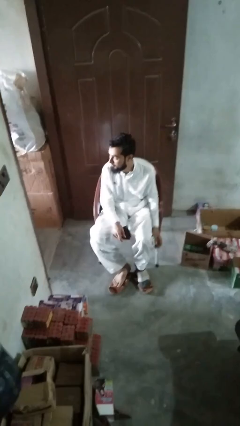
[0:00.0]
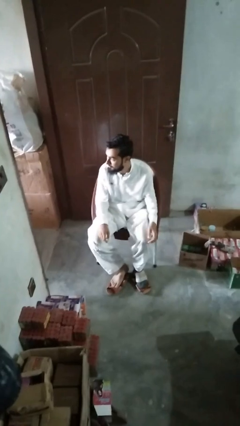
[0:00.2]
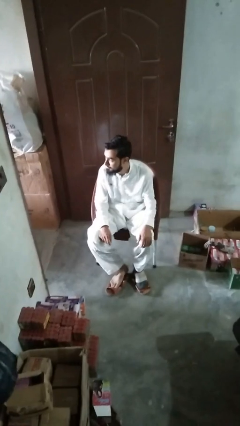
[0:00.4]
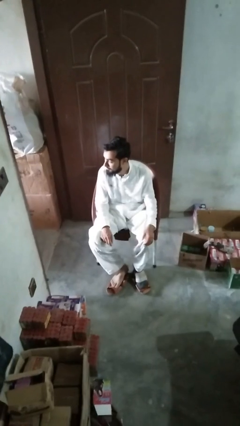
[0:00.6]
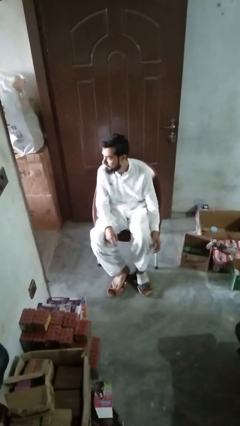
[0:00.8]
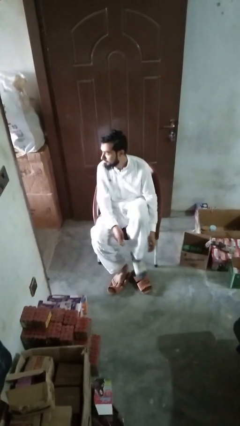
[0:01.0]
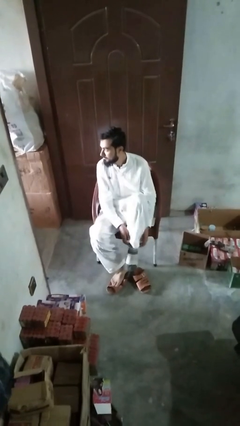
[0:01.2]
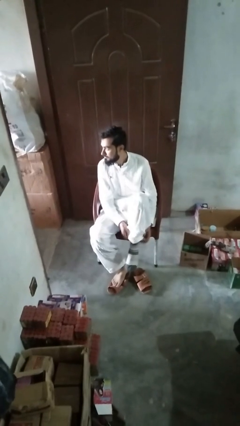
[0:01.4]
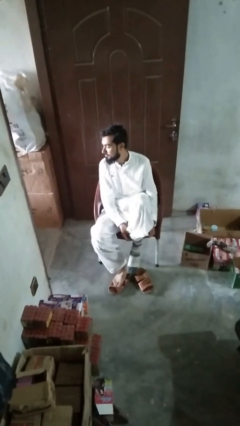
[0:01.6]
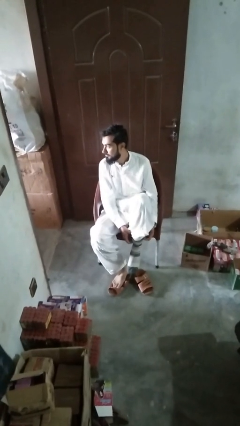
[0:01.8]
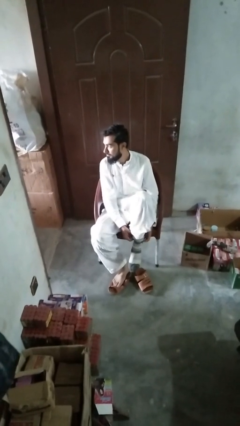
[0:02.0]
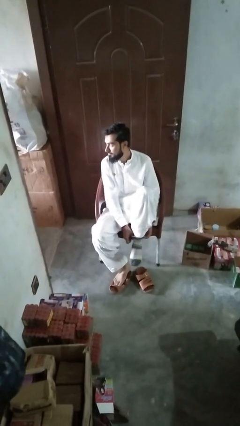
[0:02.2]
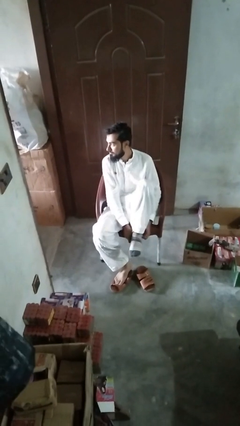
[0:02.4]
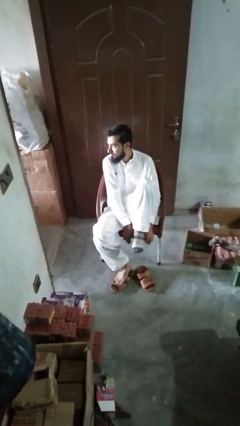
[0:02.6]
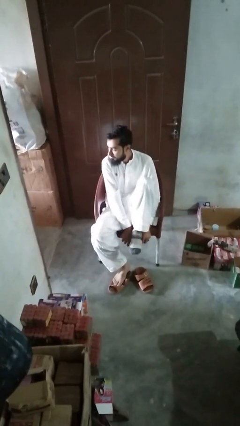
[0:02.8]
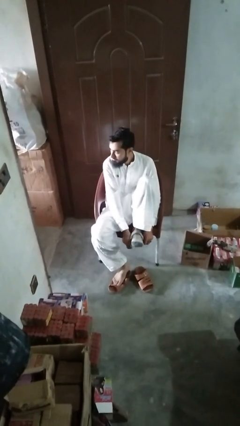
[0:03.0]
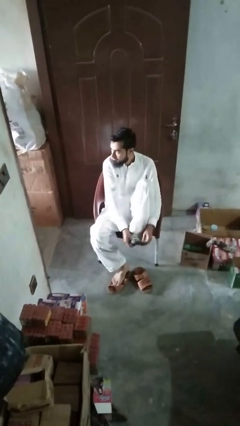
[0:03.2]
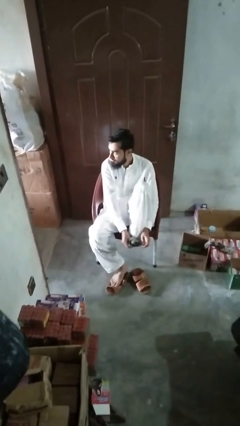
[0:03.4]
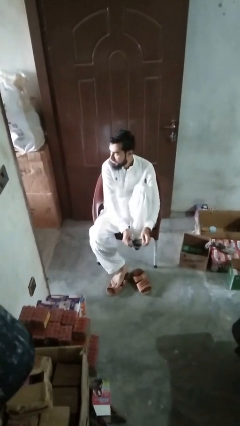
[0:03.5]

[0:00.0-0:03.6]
person takes off socks

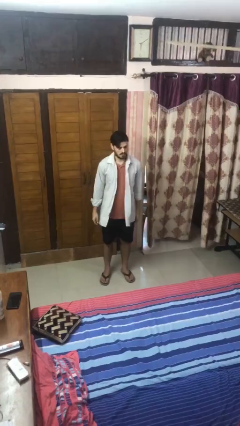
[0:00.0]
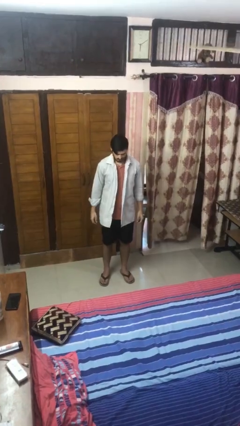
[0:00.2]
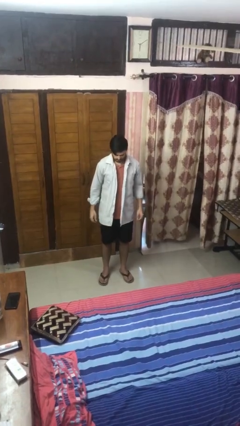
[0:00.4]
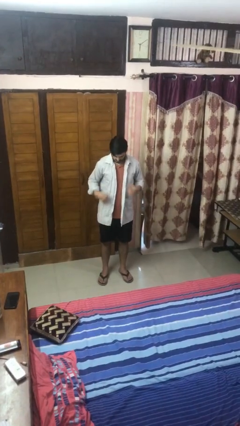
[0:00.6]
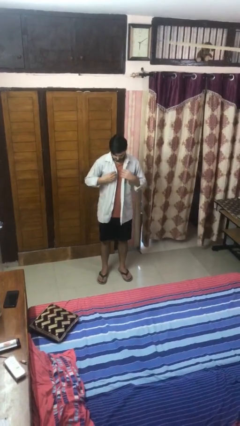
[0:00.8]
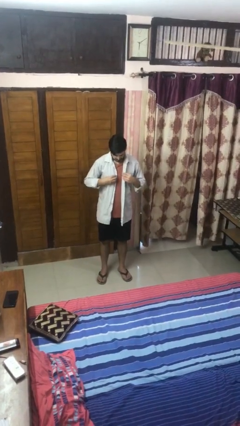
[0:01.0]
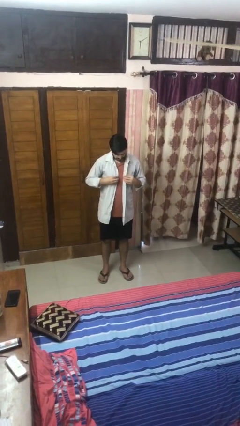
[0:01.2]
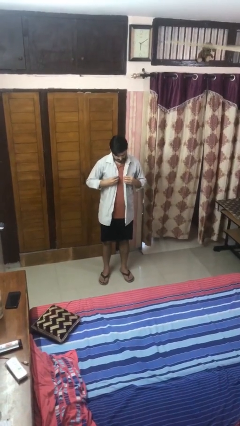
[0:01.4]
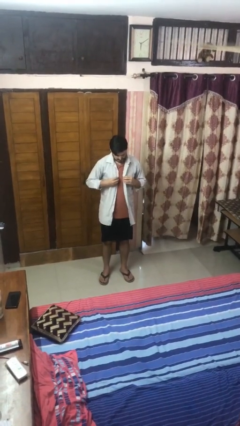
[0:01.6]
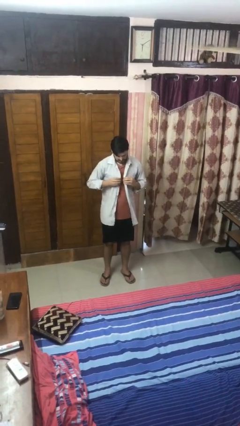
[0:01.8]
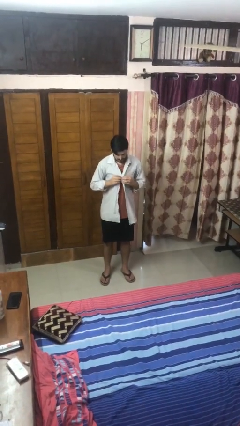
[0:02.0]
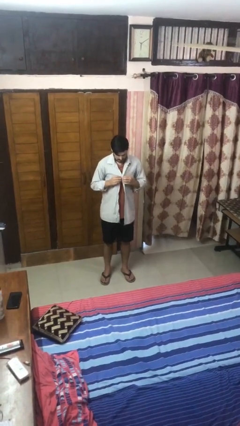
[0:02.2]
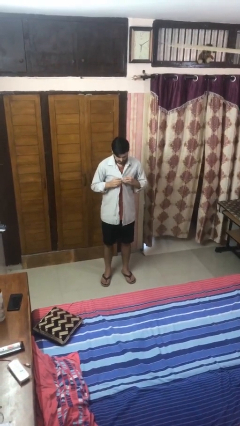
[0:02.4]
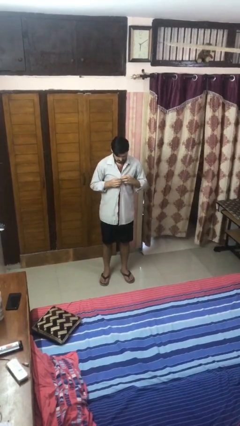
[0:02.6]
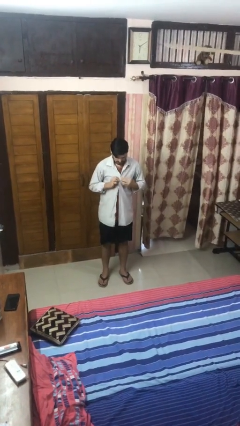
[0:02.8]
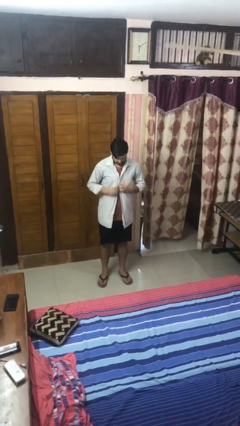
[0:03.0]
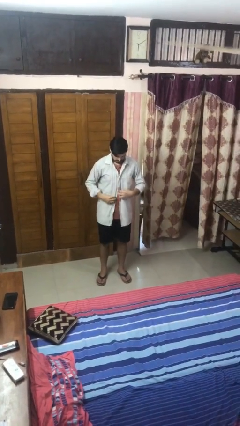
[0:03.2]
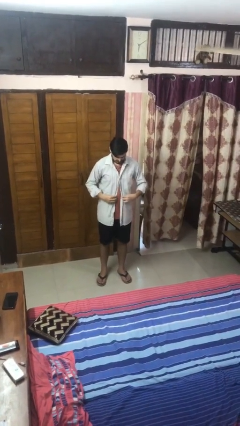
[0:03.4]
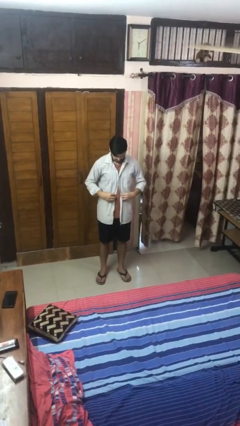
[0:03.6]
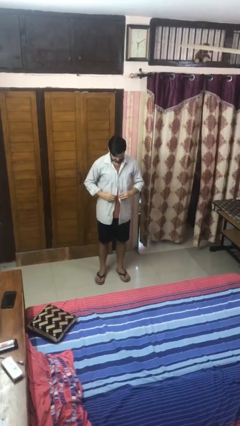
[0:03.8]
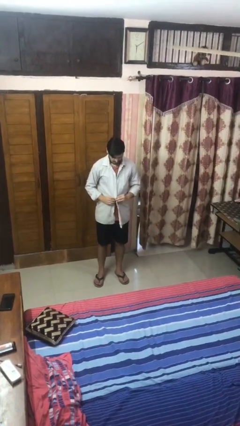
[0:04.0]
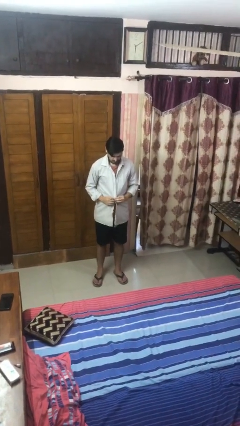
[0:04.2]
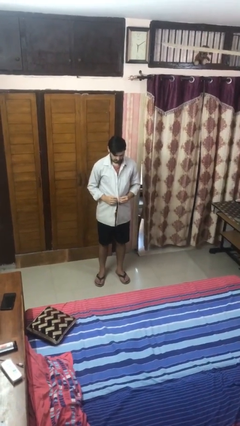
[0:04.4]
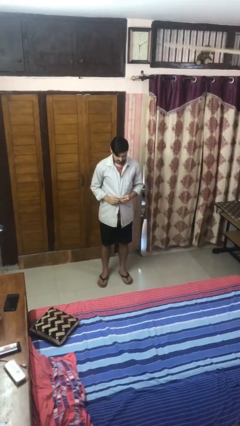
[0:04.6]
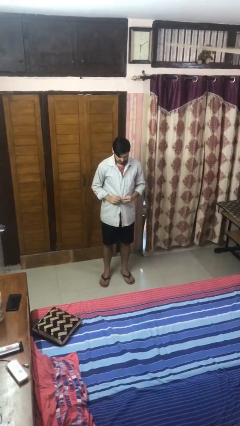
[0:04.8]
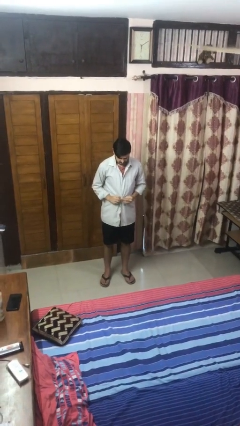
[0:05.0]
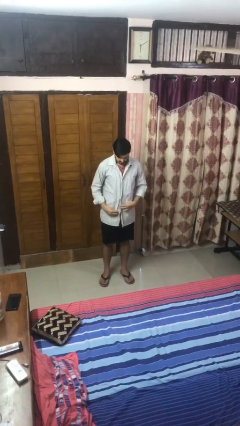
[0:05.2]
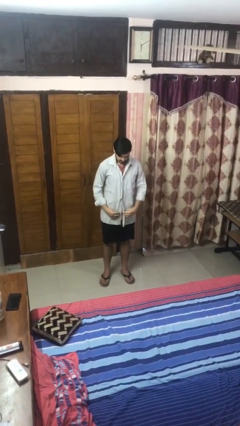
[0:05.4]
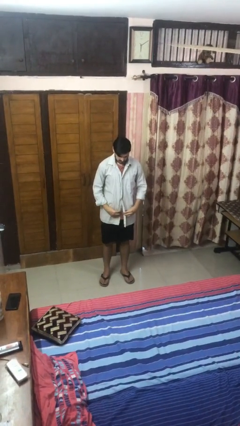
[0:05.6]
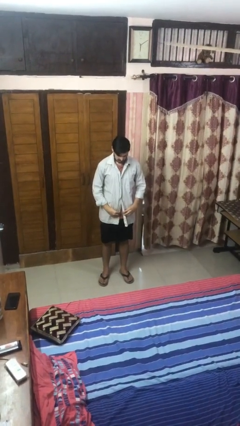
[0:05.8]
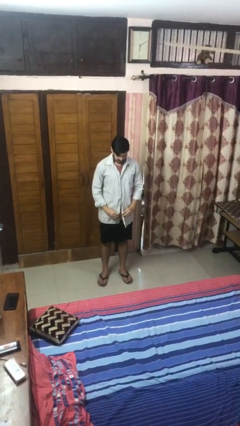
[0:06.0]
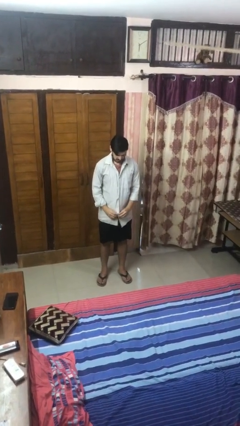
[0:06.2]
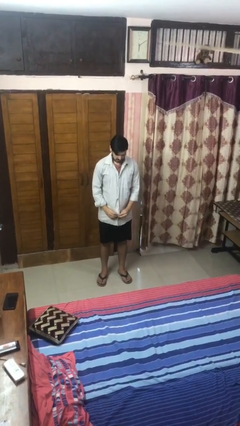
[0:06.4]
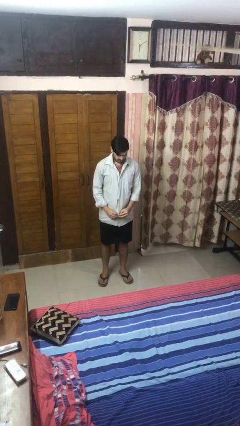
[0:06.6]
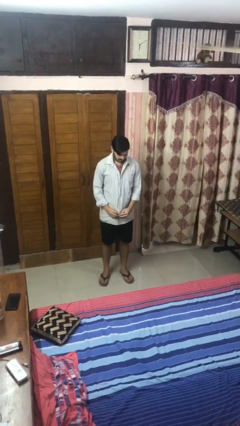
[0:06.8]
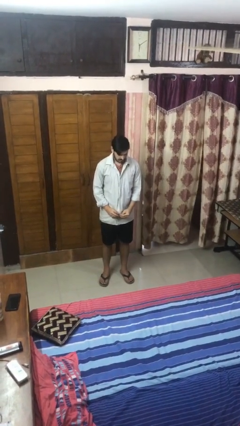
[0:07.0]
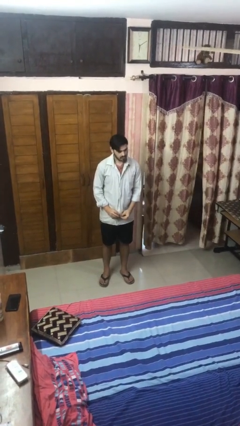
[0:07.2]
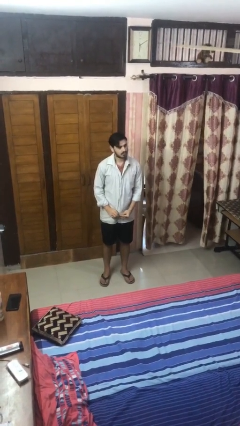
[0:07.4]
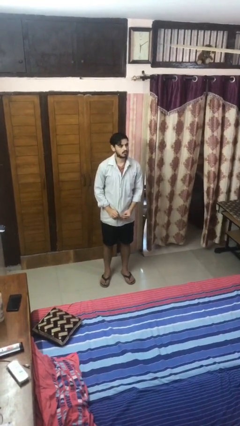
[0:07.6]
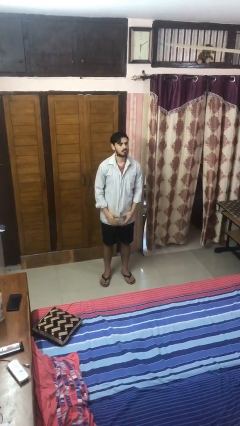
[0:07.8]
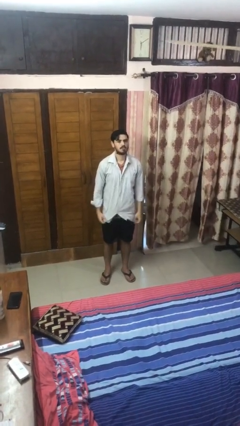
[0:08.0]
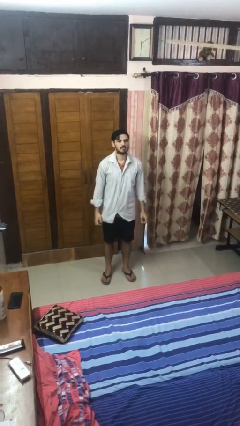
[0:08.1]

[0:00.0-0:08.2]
person buttons shirt

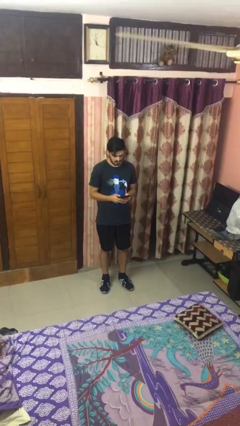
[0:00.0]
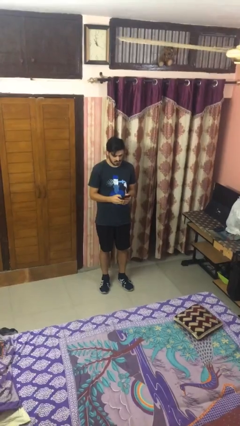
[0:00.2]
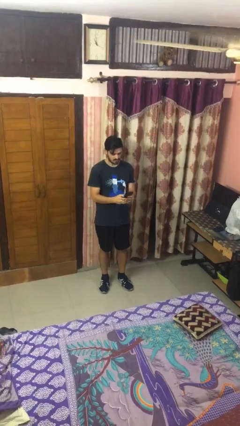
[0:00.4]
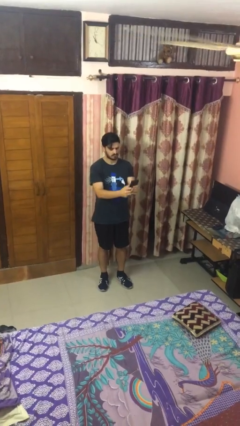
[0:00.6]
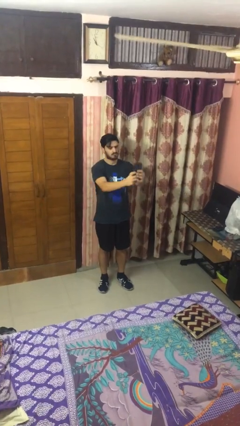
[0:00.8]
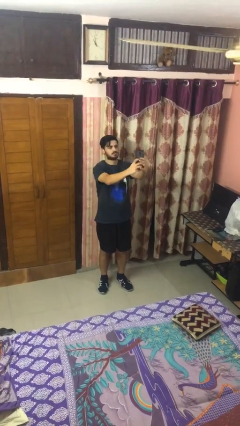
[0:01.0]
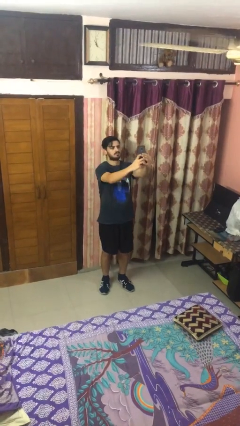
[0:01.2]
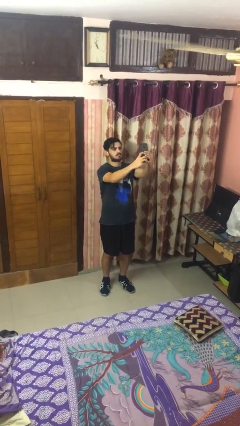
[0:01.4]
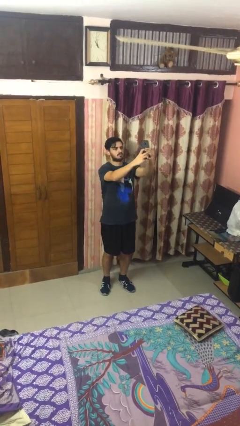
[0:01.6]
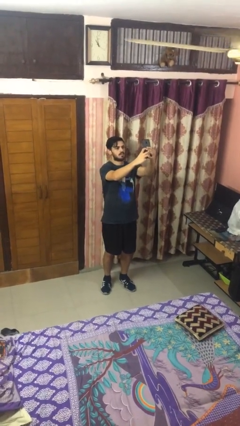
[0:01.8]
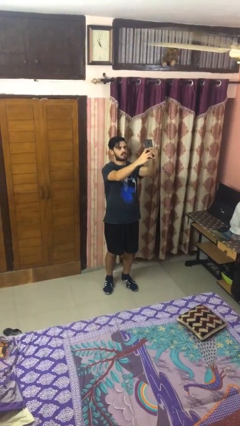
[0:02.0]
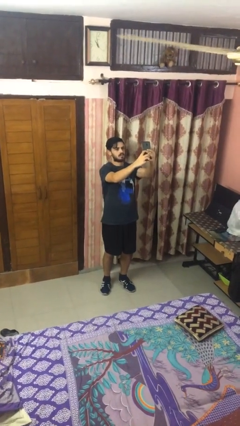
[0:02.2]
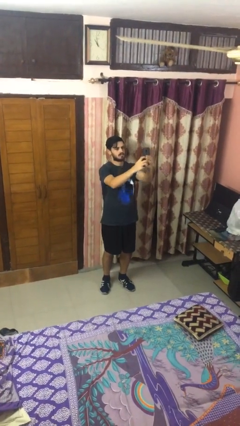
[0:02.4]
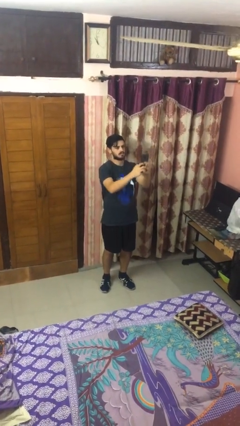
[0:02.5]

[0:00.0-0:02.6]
person takes selfie

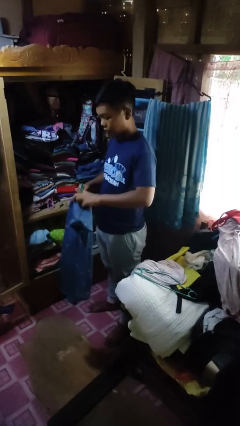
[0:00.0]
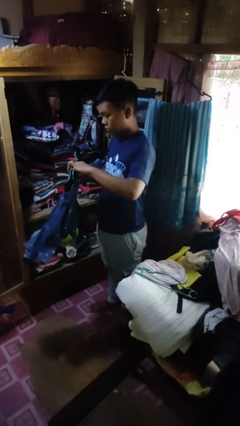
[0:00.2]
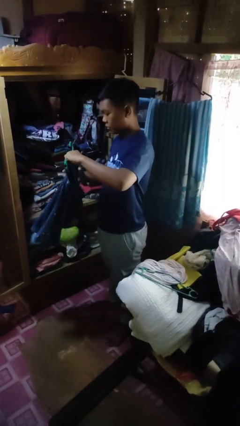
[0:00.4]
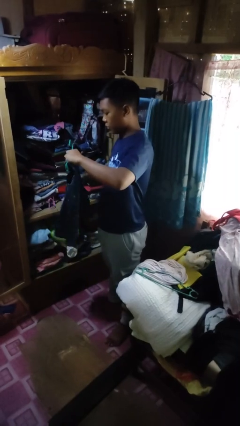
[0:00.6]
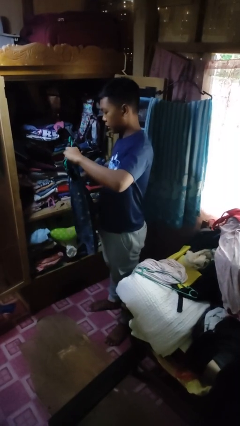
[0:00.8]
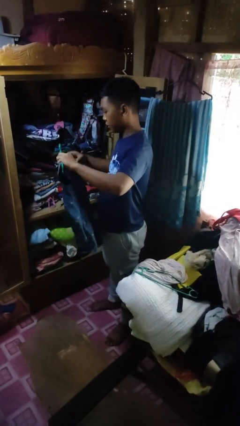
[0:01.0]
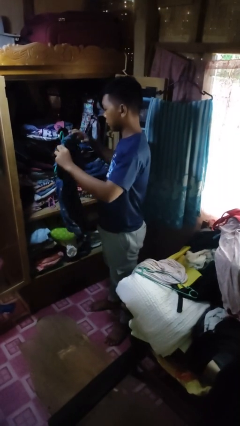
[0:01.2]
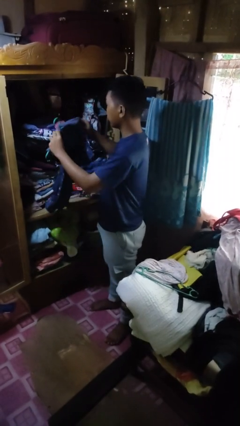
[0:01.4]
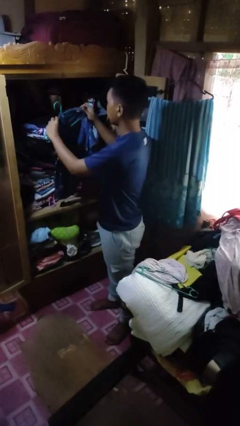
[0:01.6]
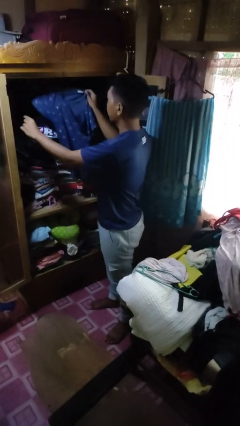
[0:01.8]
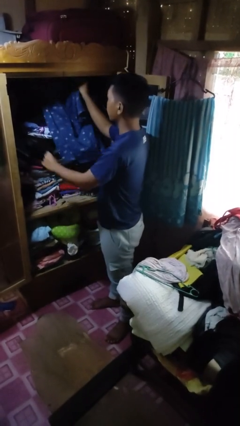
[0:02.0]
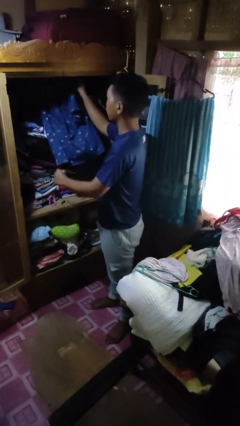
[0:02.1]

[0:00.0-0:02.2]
person puts clothes into closet

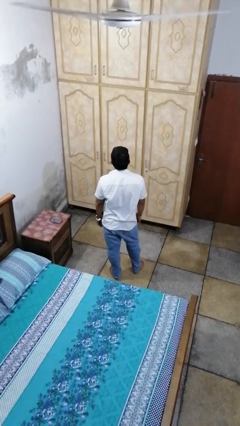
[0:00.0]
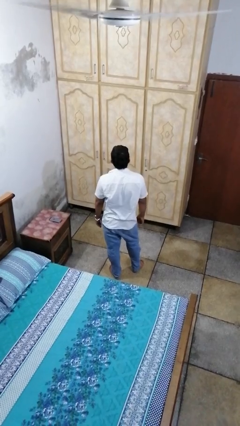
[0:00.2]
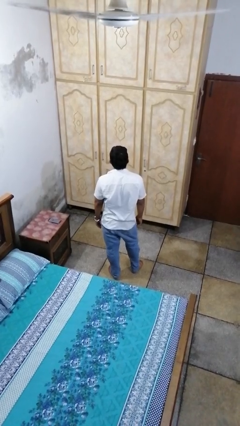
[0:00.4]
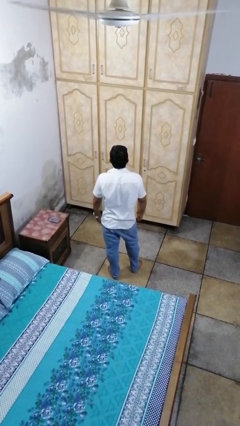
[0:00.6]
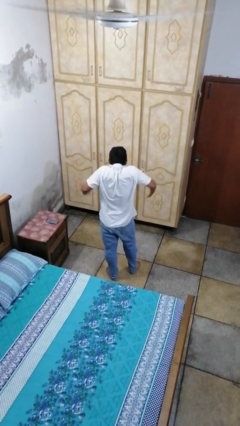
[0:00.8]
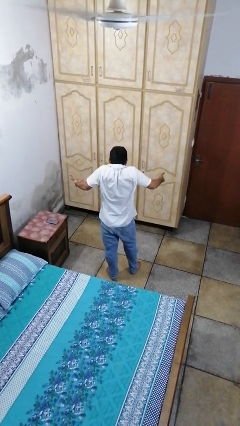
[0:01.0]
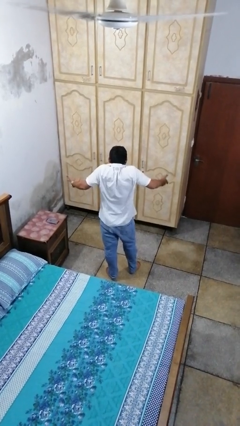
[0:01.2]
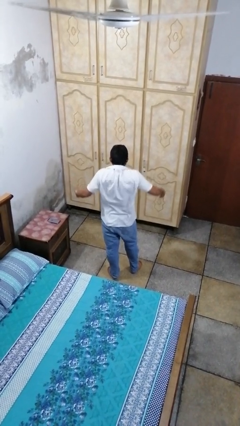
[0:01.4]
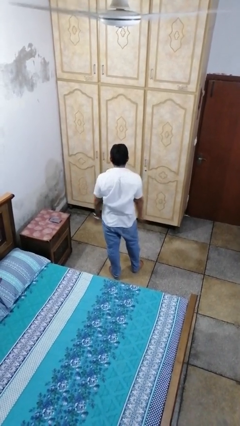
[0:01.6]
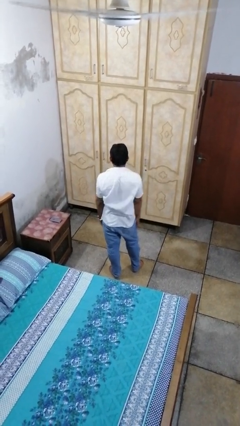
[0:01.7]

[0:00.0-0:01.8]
person shrugs
